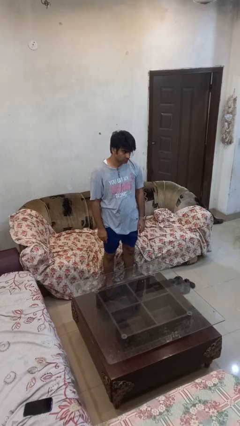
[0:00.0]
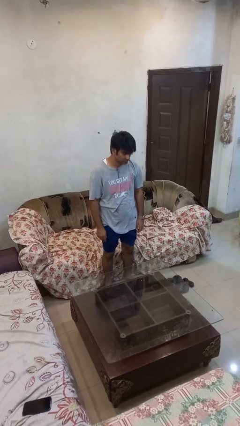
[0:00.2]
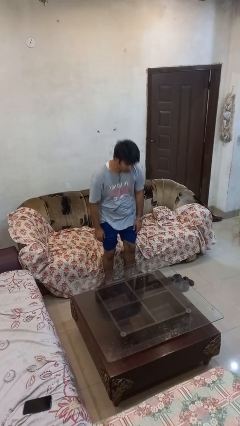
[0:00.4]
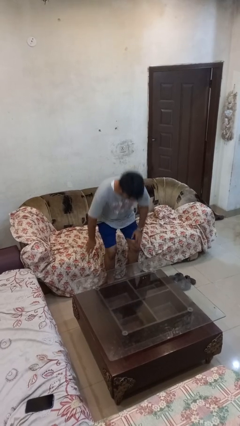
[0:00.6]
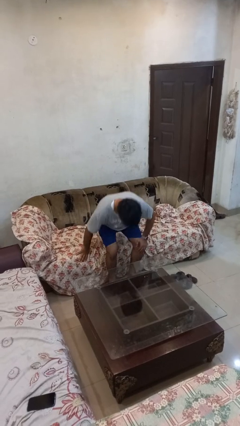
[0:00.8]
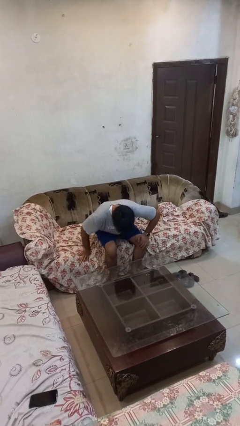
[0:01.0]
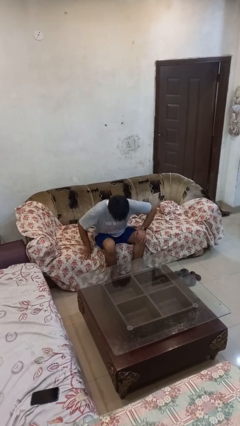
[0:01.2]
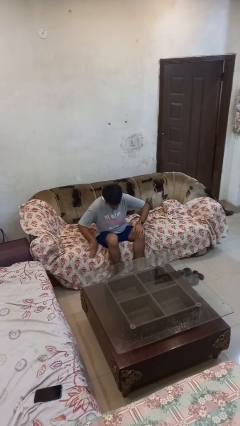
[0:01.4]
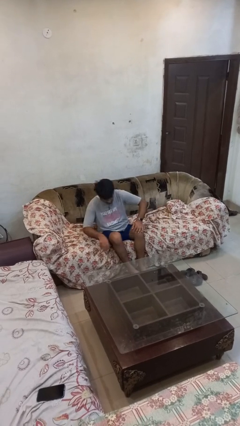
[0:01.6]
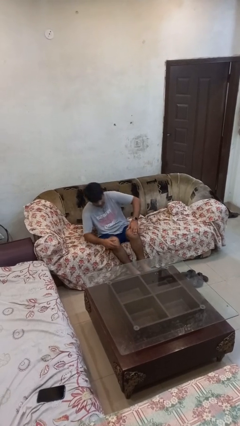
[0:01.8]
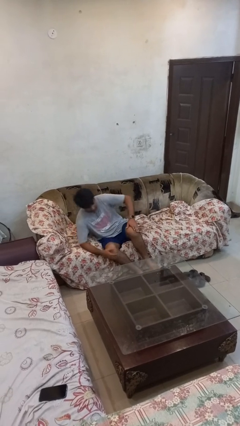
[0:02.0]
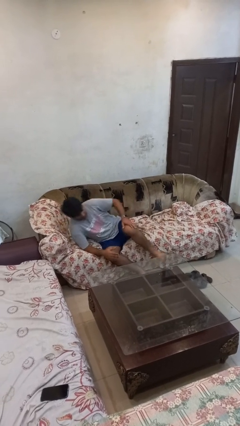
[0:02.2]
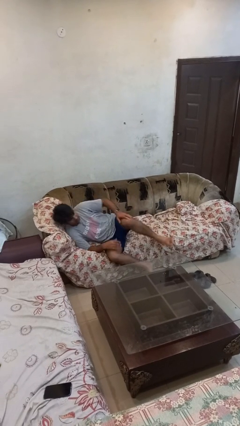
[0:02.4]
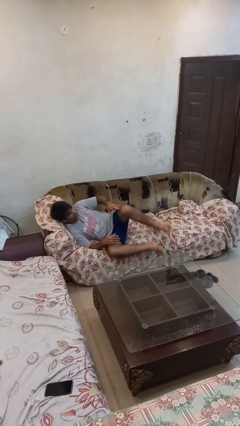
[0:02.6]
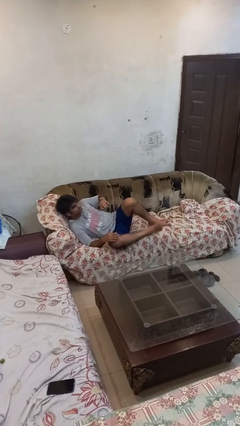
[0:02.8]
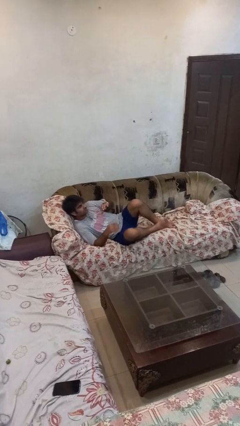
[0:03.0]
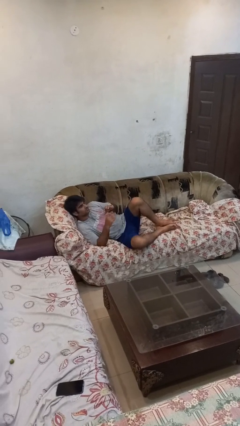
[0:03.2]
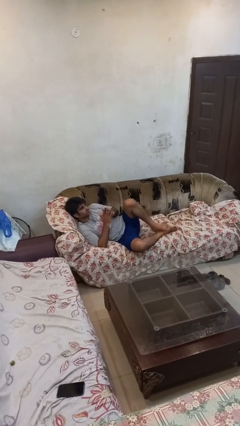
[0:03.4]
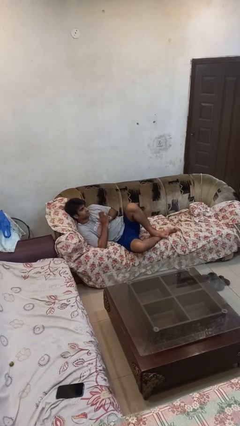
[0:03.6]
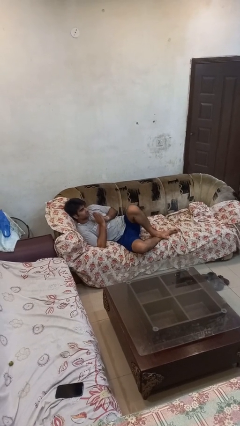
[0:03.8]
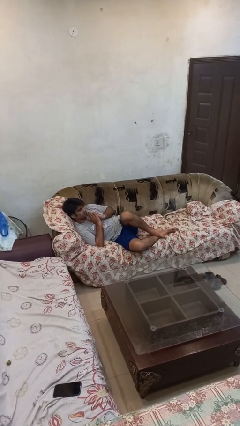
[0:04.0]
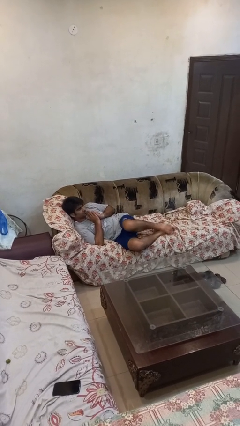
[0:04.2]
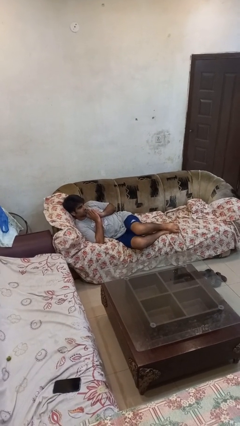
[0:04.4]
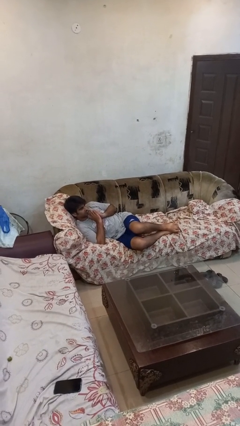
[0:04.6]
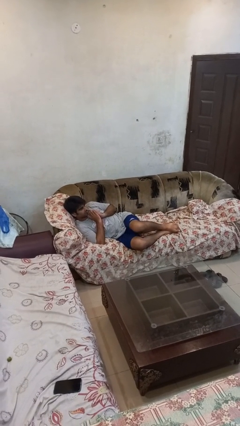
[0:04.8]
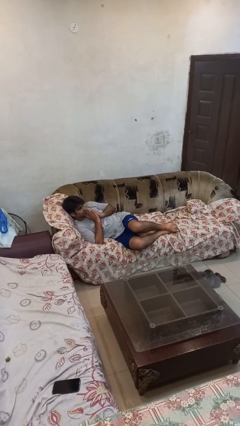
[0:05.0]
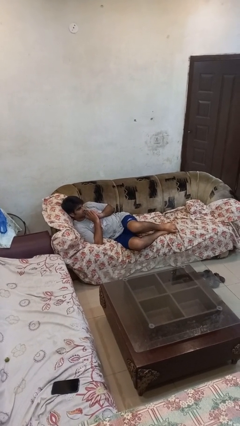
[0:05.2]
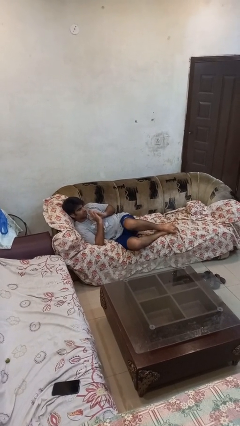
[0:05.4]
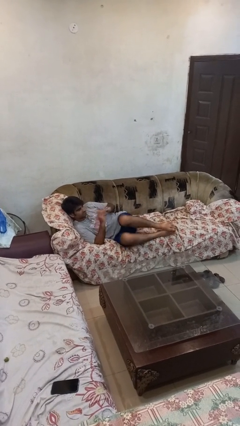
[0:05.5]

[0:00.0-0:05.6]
person lies down on couch

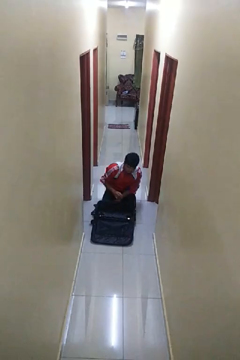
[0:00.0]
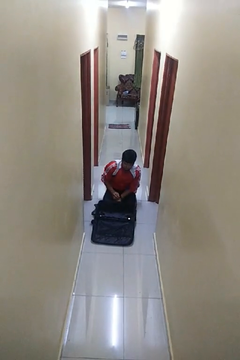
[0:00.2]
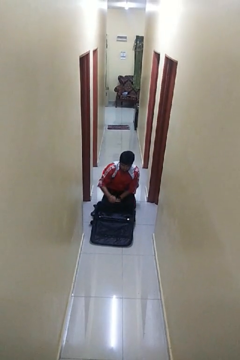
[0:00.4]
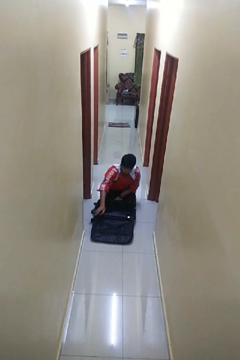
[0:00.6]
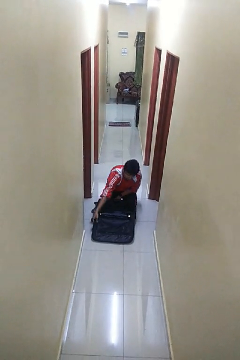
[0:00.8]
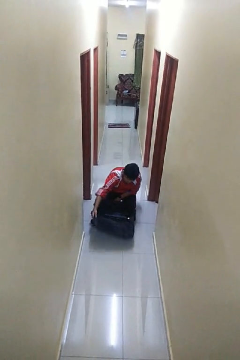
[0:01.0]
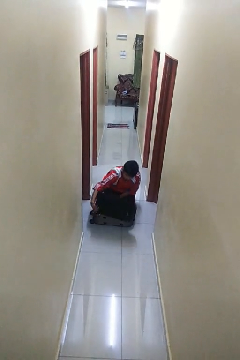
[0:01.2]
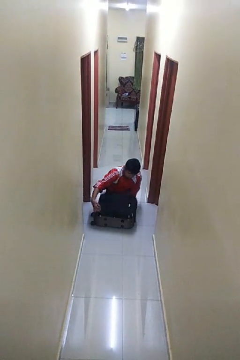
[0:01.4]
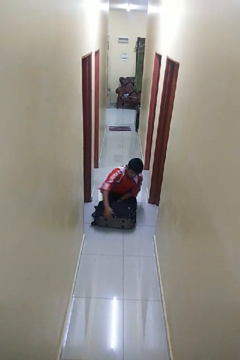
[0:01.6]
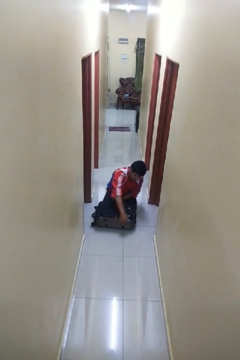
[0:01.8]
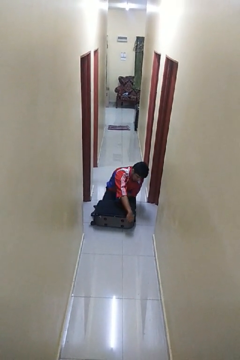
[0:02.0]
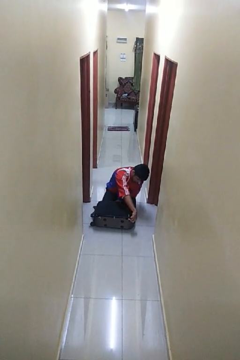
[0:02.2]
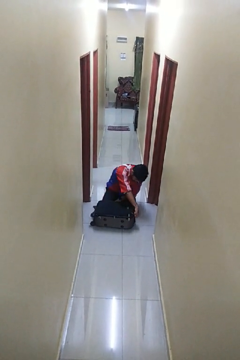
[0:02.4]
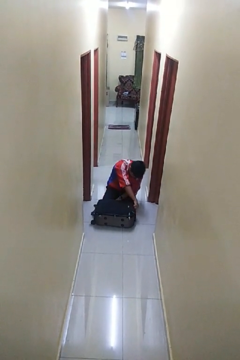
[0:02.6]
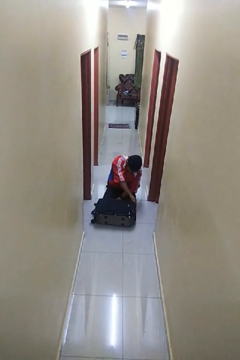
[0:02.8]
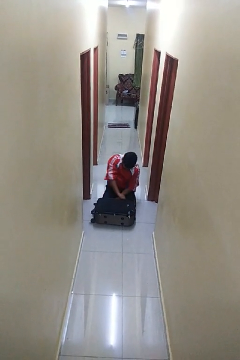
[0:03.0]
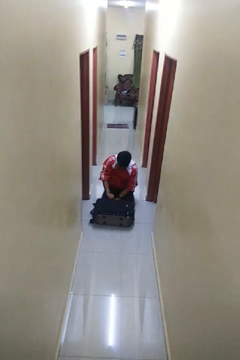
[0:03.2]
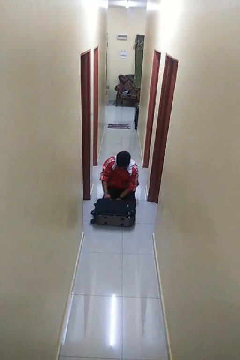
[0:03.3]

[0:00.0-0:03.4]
person closes suitcase

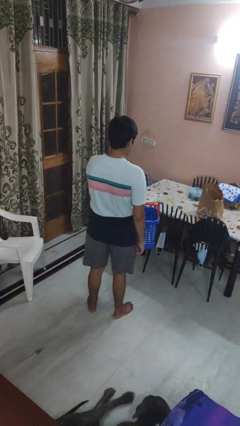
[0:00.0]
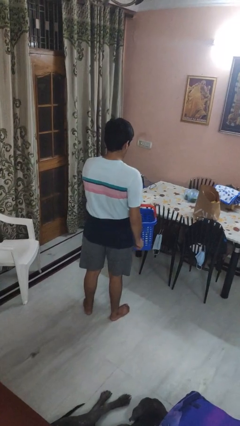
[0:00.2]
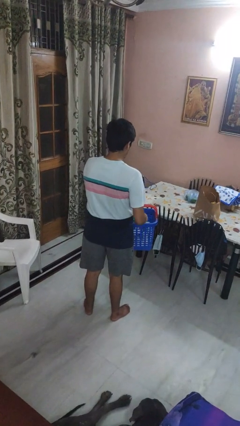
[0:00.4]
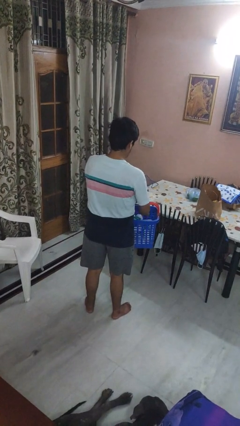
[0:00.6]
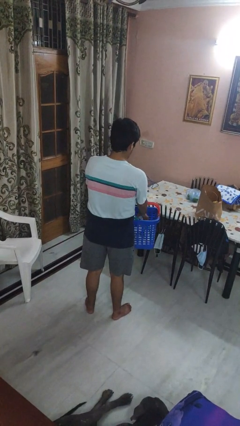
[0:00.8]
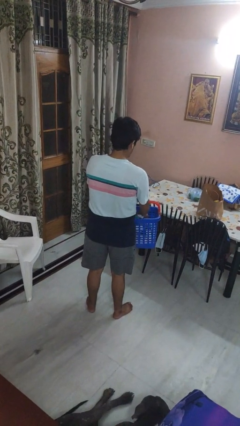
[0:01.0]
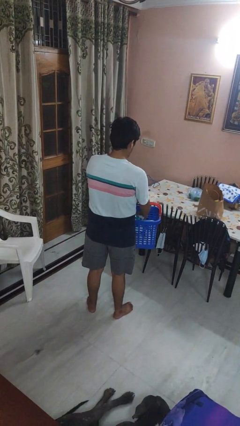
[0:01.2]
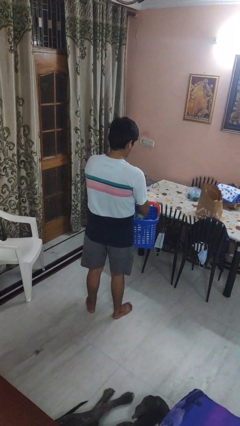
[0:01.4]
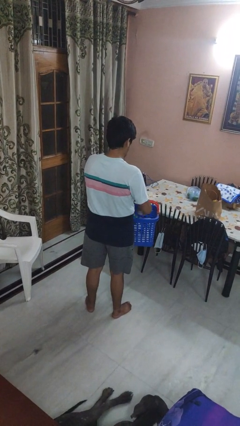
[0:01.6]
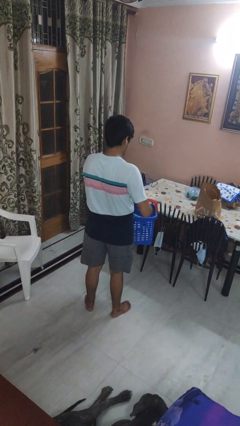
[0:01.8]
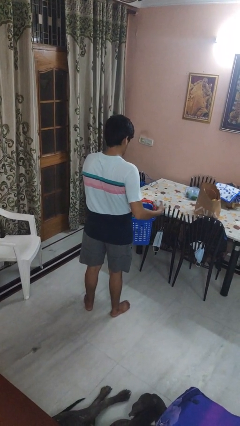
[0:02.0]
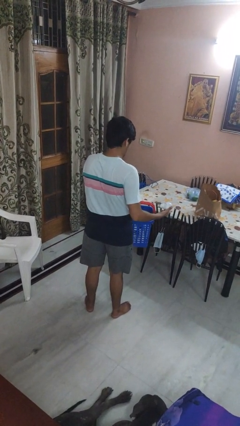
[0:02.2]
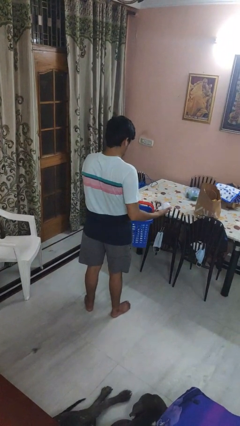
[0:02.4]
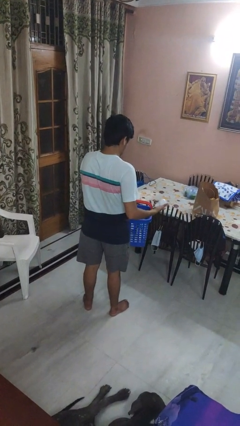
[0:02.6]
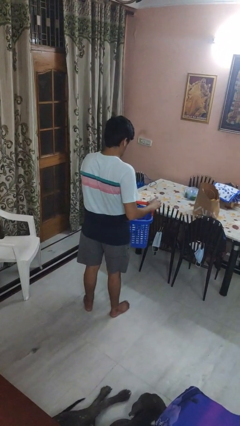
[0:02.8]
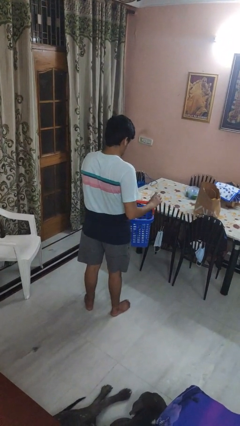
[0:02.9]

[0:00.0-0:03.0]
person takes object from basket

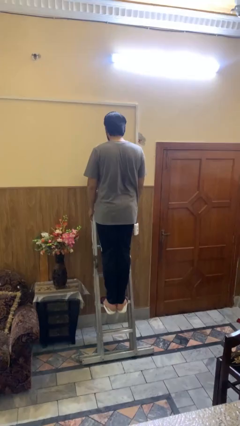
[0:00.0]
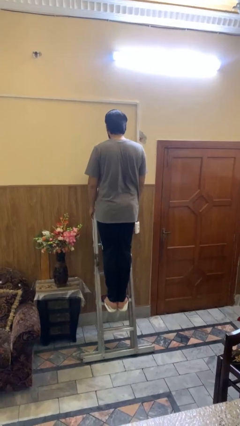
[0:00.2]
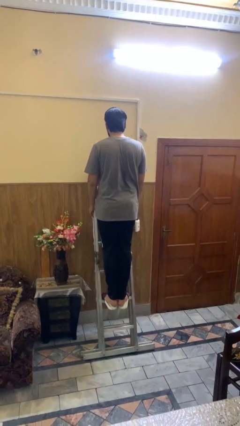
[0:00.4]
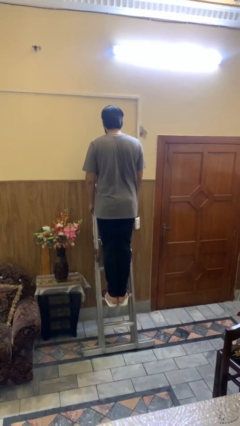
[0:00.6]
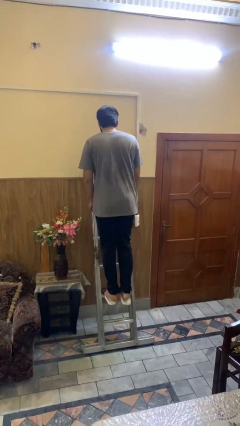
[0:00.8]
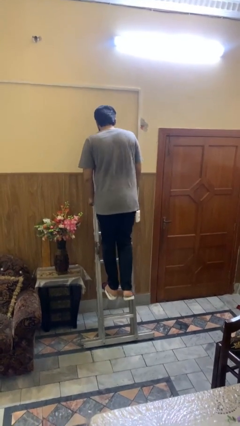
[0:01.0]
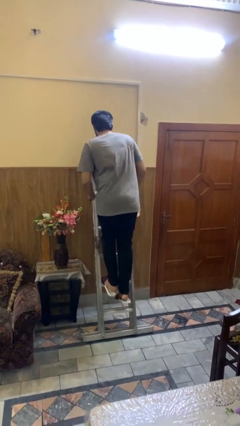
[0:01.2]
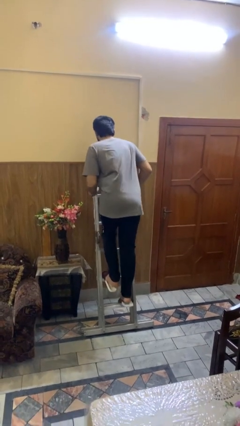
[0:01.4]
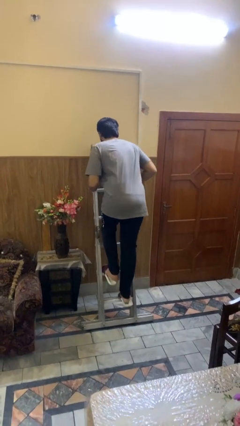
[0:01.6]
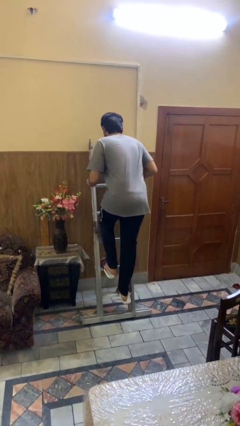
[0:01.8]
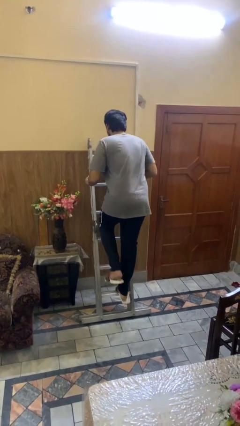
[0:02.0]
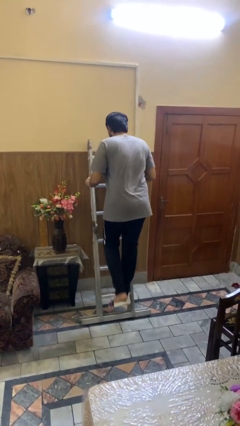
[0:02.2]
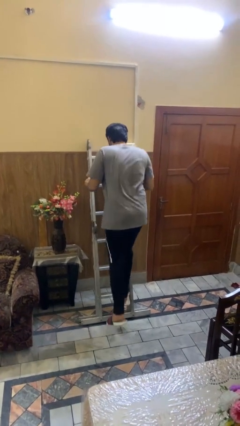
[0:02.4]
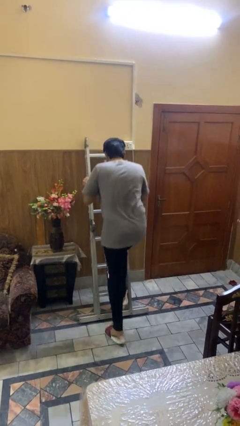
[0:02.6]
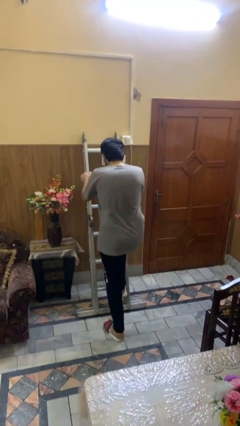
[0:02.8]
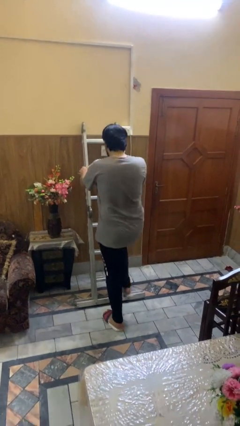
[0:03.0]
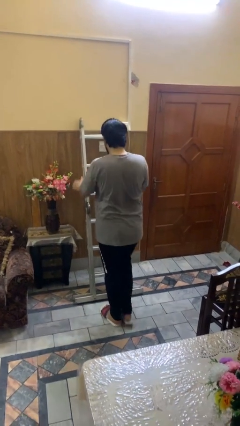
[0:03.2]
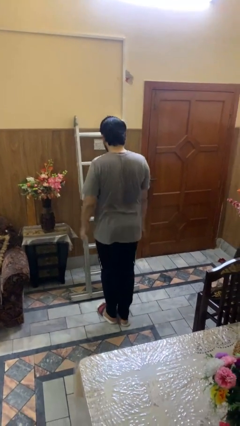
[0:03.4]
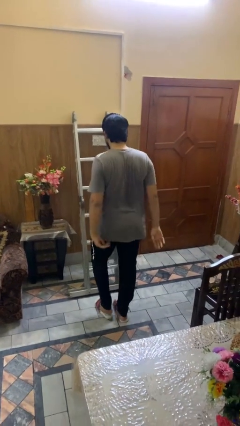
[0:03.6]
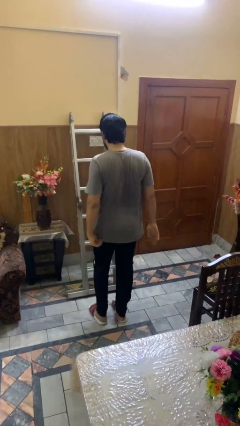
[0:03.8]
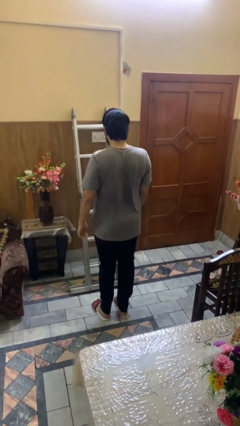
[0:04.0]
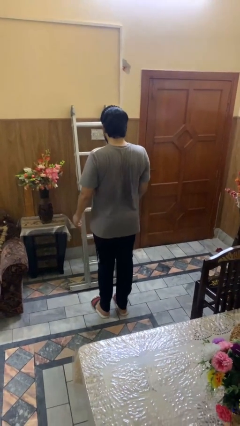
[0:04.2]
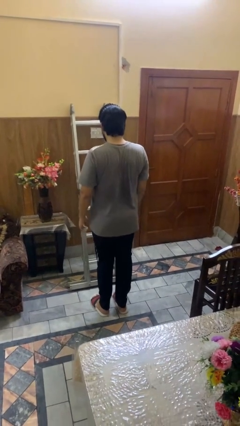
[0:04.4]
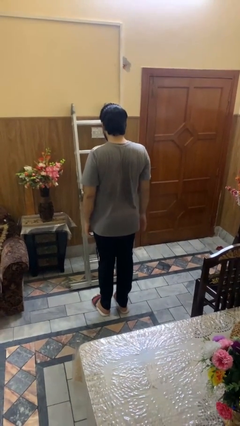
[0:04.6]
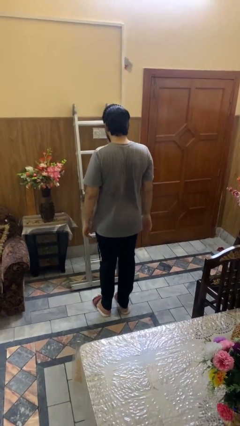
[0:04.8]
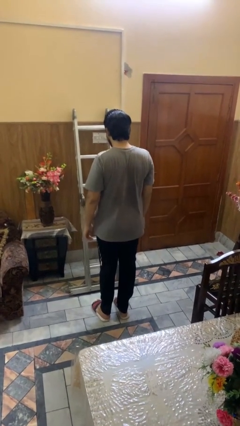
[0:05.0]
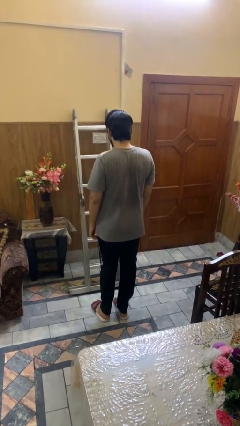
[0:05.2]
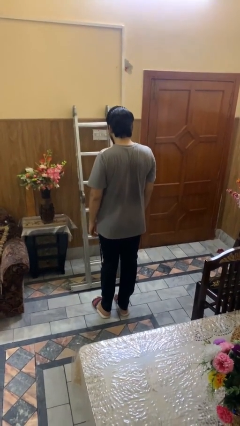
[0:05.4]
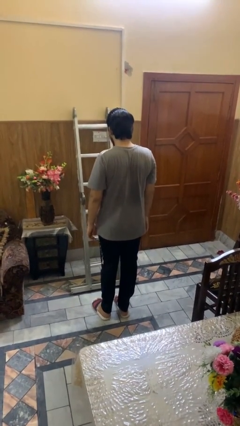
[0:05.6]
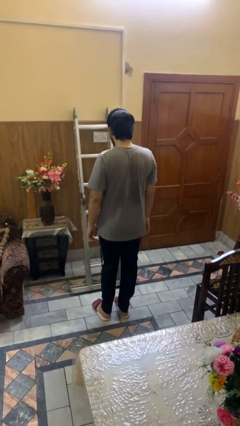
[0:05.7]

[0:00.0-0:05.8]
person climbs down ladder

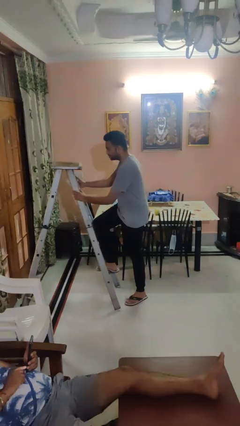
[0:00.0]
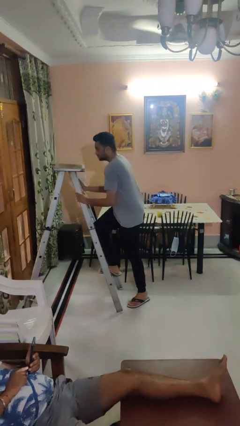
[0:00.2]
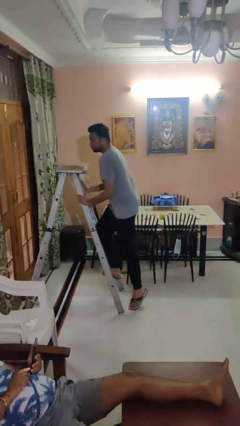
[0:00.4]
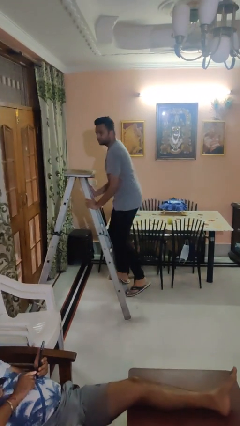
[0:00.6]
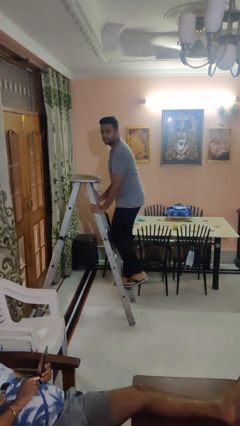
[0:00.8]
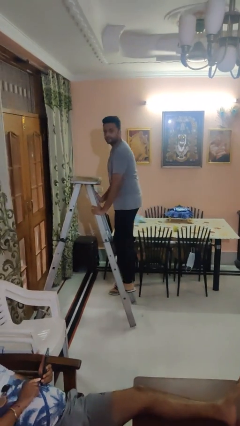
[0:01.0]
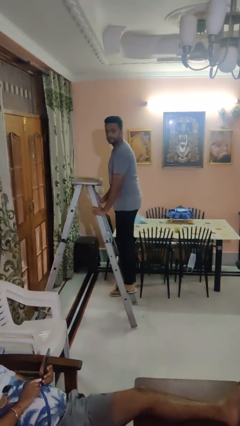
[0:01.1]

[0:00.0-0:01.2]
person climbs up ladder
